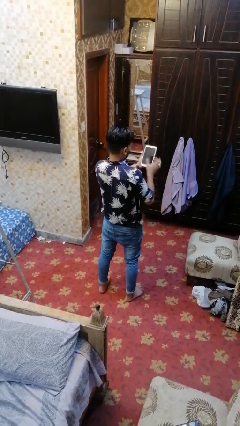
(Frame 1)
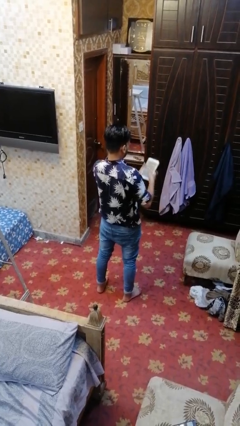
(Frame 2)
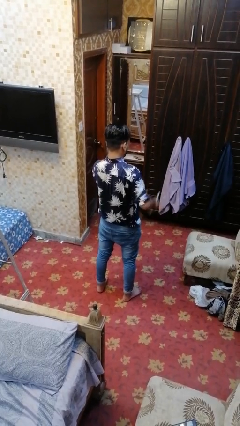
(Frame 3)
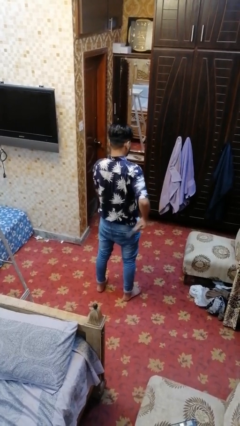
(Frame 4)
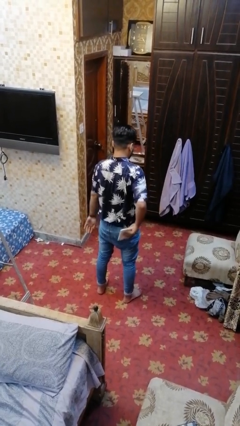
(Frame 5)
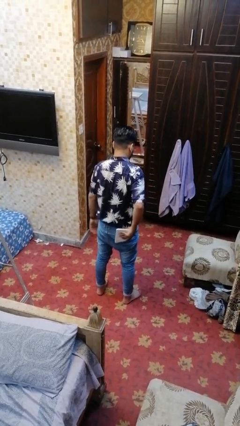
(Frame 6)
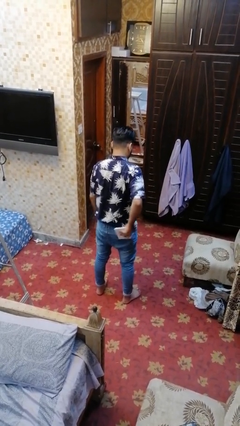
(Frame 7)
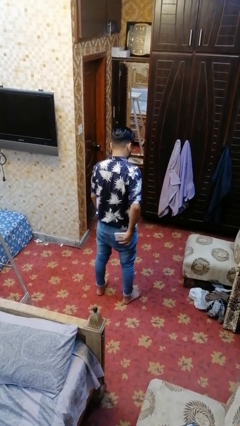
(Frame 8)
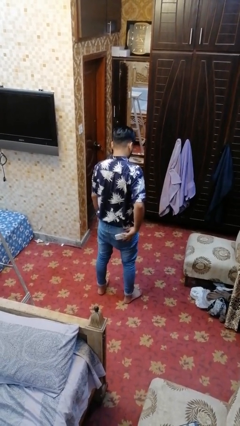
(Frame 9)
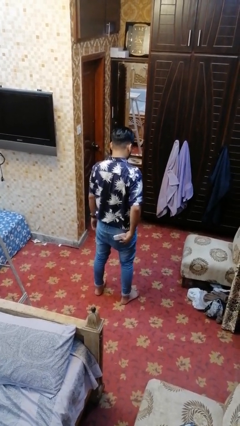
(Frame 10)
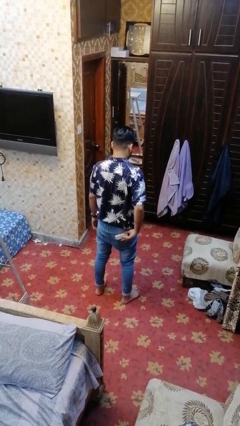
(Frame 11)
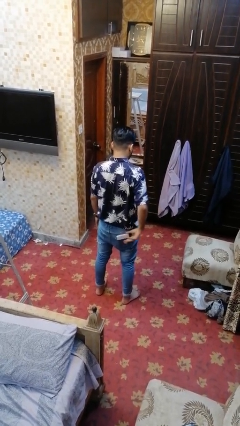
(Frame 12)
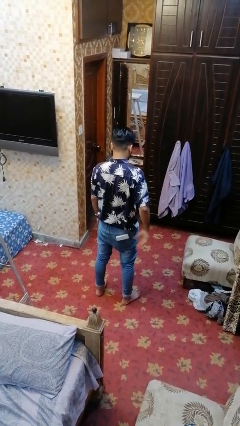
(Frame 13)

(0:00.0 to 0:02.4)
person puts phone into pocket

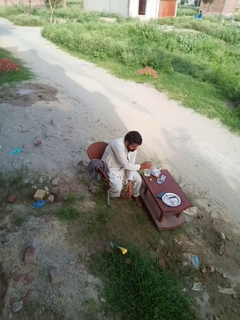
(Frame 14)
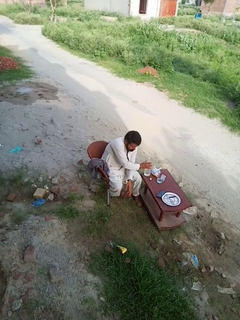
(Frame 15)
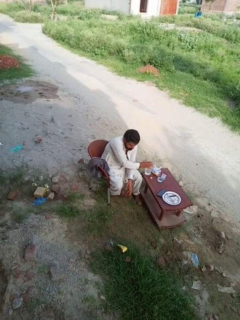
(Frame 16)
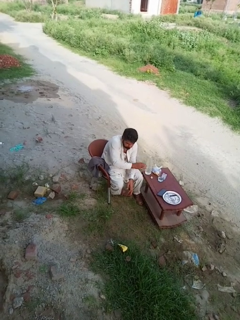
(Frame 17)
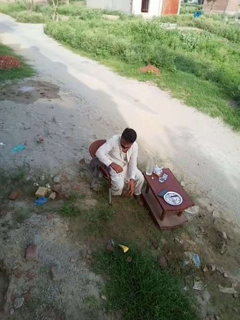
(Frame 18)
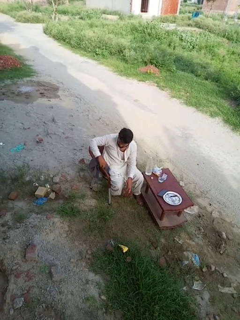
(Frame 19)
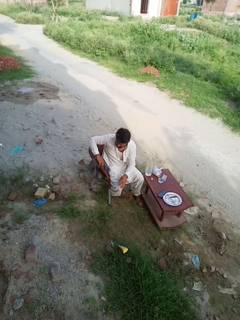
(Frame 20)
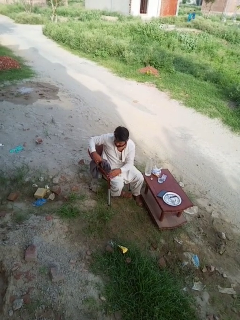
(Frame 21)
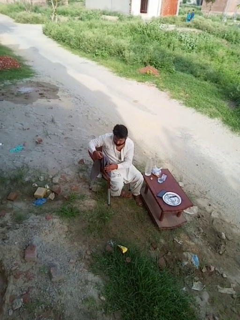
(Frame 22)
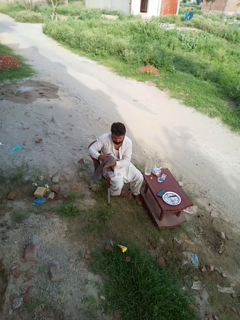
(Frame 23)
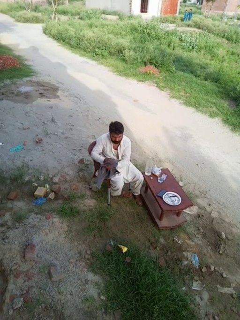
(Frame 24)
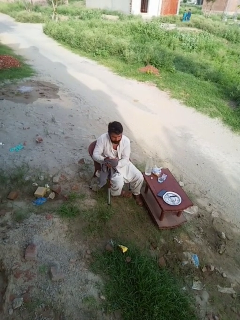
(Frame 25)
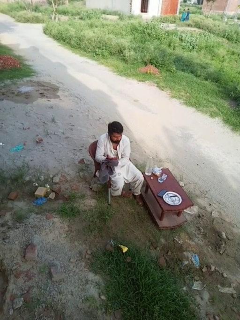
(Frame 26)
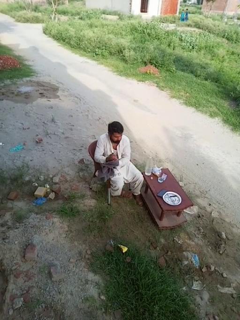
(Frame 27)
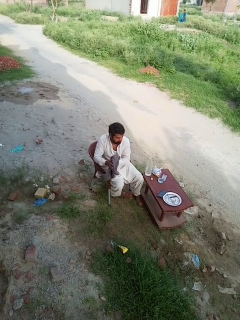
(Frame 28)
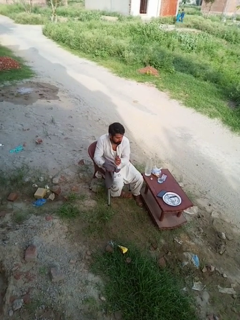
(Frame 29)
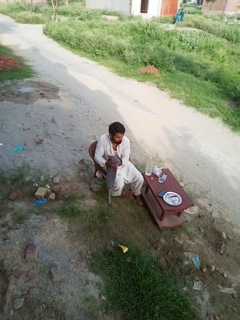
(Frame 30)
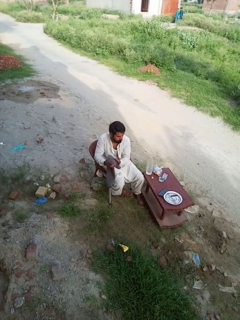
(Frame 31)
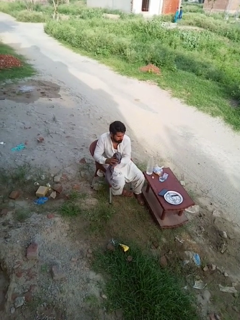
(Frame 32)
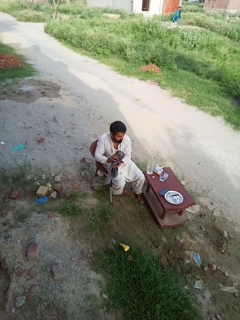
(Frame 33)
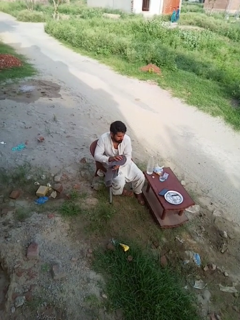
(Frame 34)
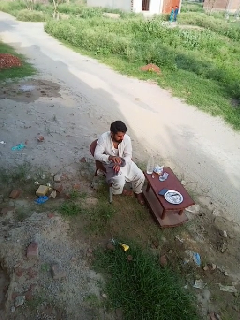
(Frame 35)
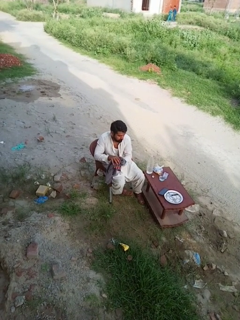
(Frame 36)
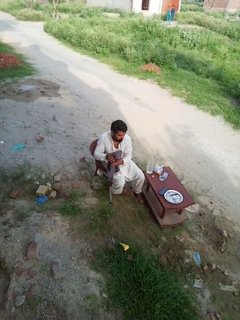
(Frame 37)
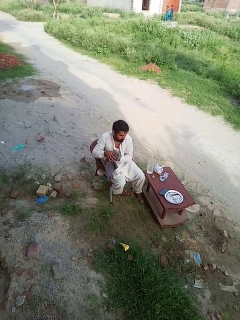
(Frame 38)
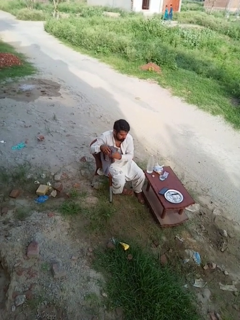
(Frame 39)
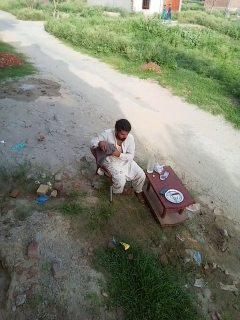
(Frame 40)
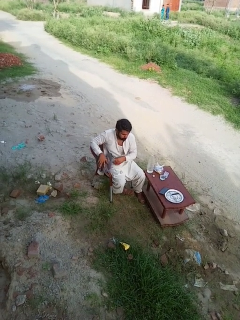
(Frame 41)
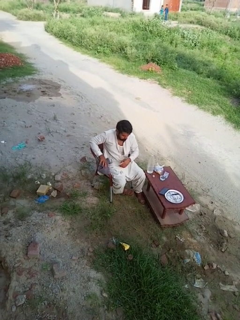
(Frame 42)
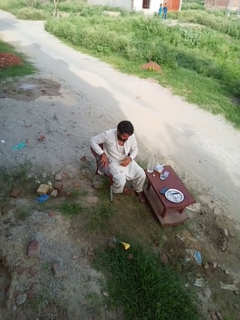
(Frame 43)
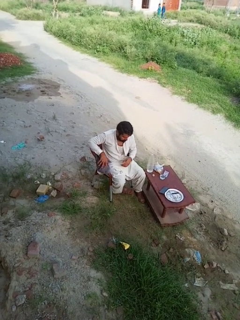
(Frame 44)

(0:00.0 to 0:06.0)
person dries hands with towel

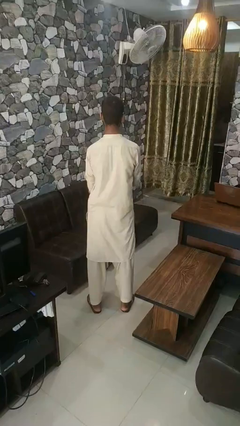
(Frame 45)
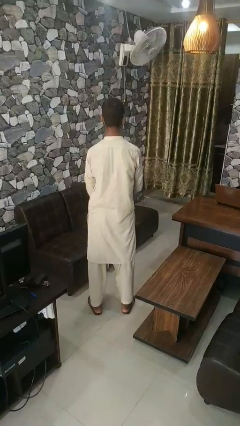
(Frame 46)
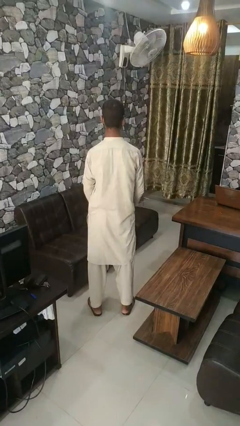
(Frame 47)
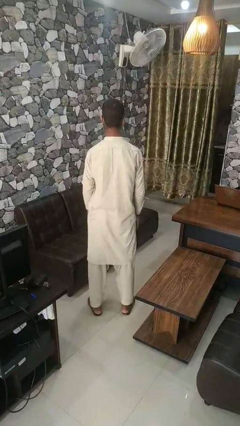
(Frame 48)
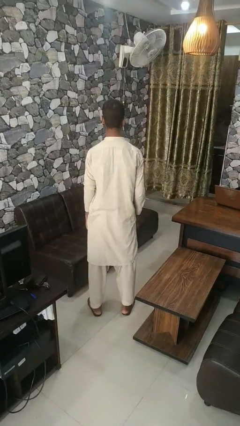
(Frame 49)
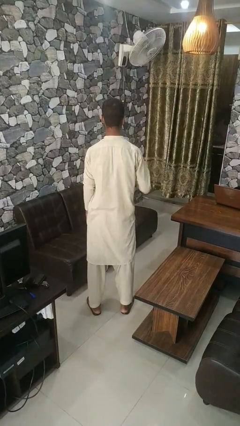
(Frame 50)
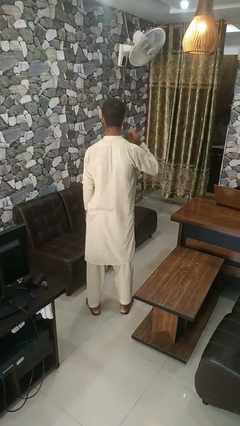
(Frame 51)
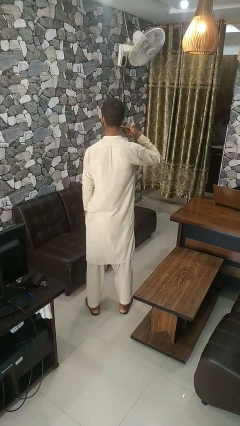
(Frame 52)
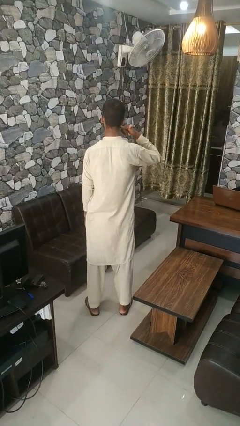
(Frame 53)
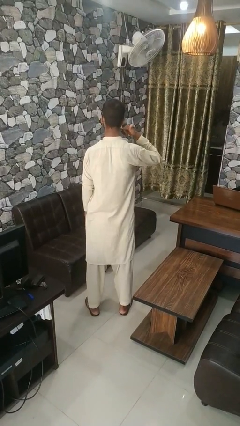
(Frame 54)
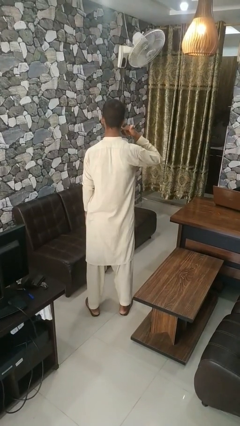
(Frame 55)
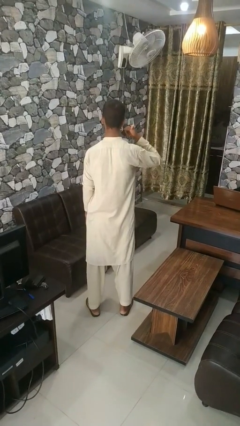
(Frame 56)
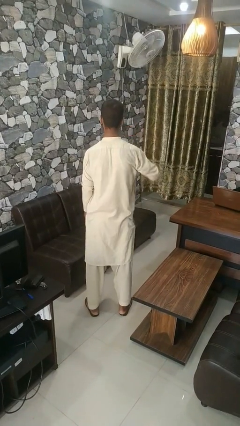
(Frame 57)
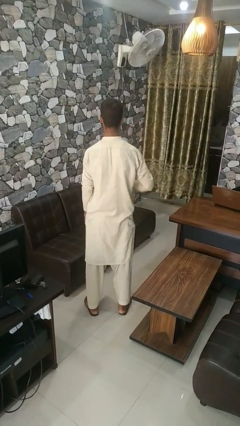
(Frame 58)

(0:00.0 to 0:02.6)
person gestures call me

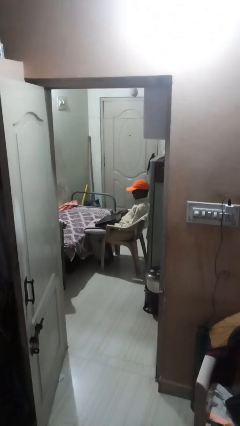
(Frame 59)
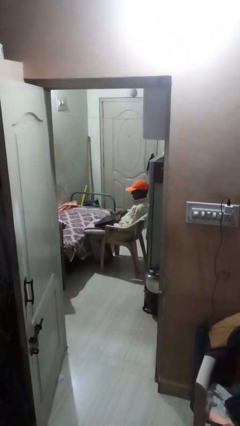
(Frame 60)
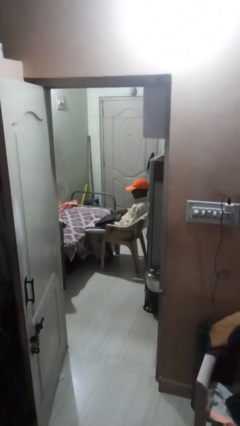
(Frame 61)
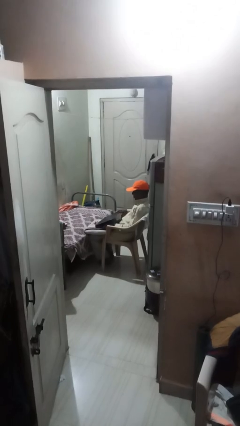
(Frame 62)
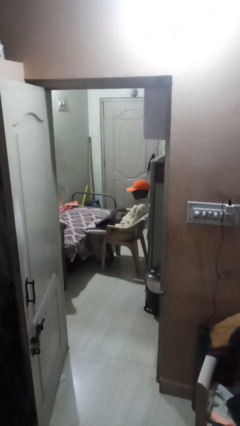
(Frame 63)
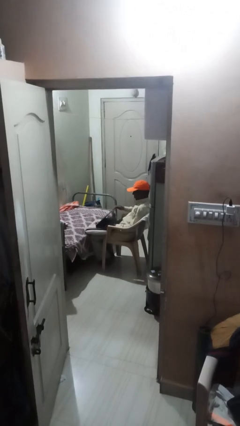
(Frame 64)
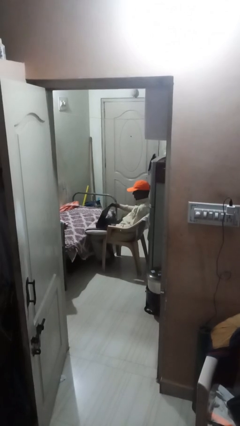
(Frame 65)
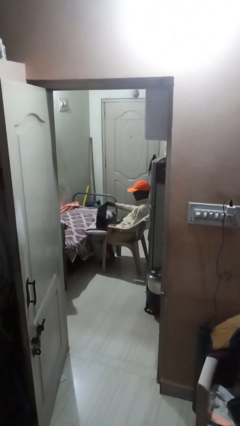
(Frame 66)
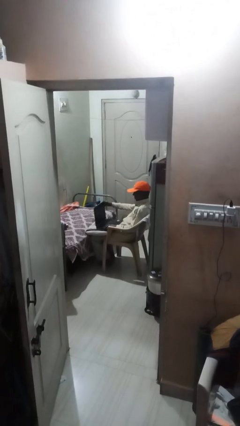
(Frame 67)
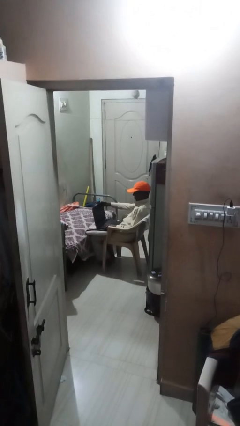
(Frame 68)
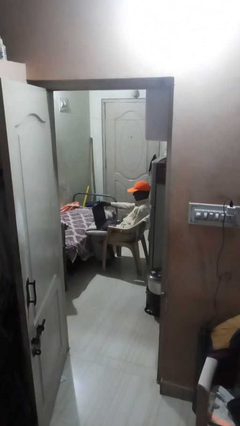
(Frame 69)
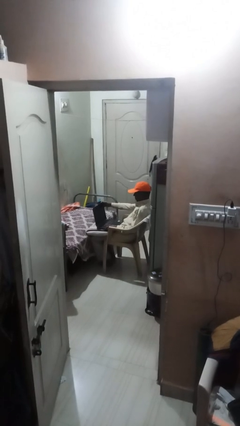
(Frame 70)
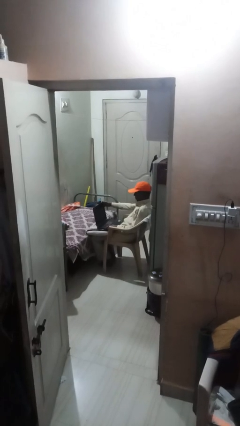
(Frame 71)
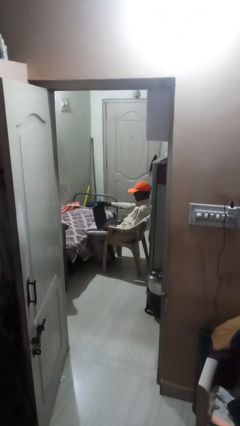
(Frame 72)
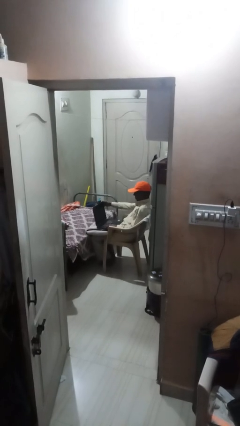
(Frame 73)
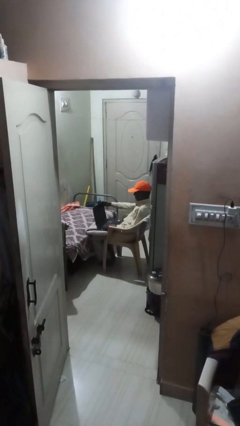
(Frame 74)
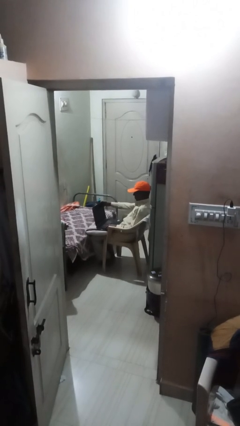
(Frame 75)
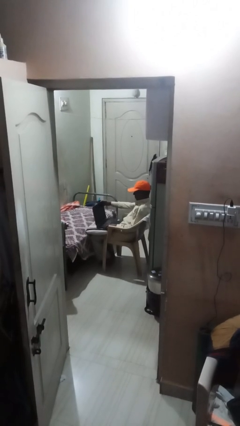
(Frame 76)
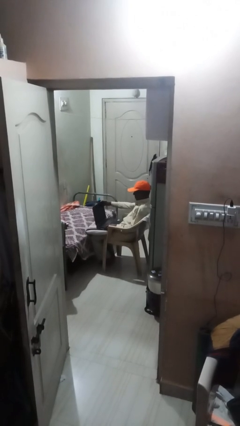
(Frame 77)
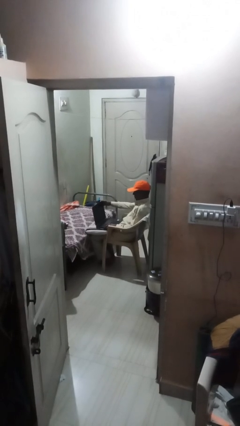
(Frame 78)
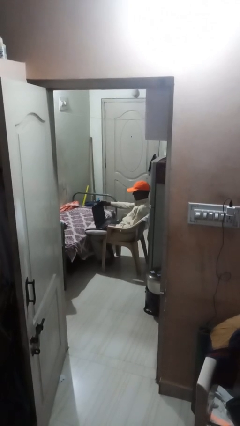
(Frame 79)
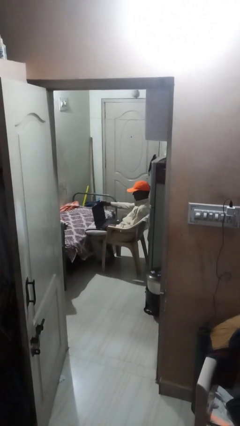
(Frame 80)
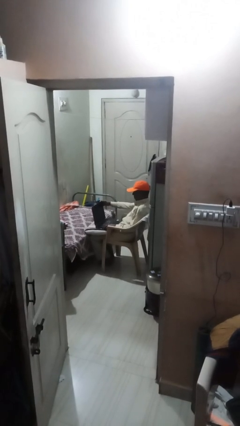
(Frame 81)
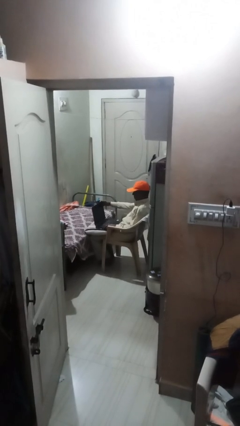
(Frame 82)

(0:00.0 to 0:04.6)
person interacts with laptop

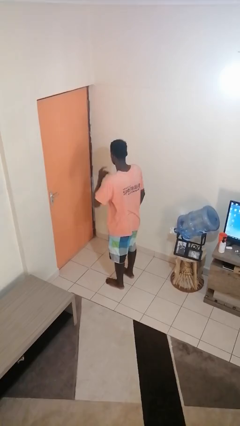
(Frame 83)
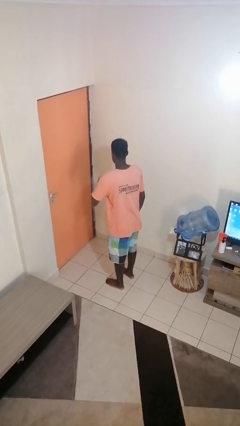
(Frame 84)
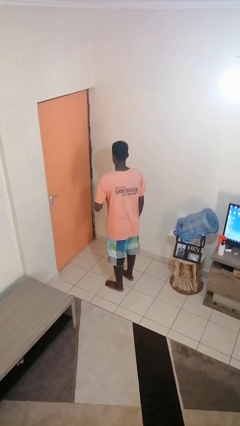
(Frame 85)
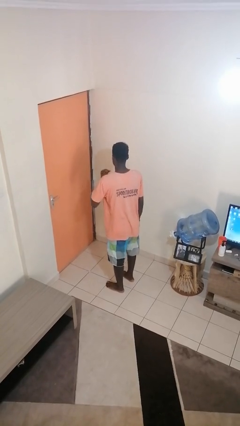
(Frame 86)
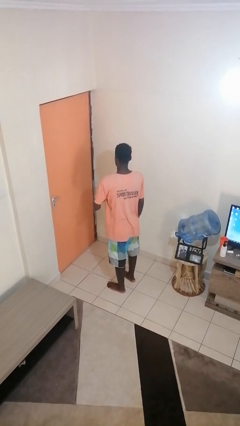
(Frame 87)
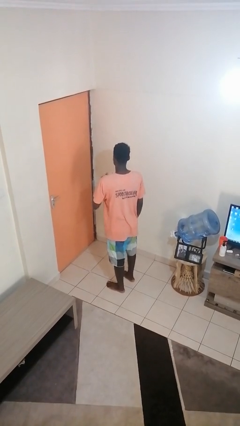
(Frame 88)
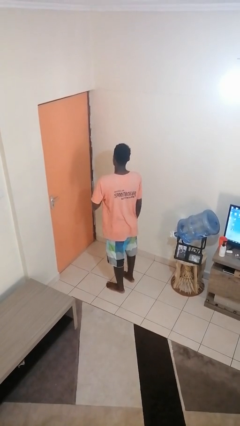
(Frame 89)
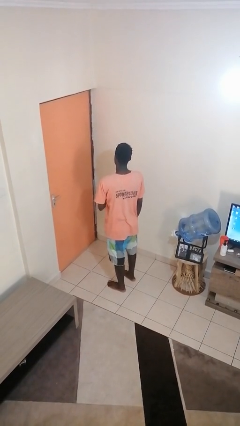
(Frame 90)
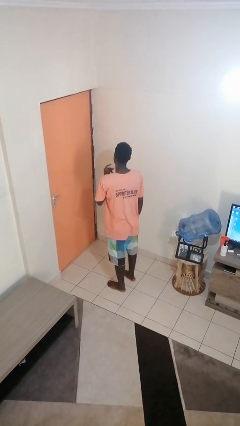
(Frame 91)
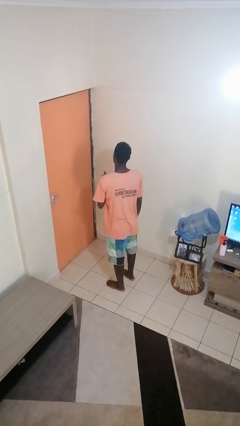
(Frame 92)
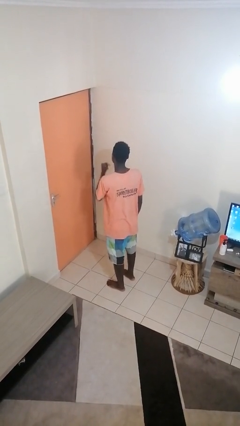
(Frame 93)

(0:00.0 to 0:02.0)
person snaps fingers

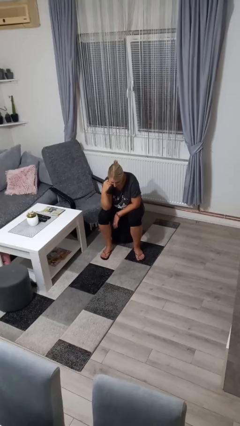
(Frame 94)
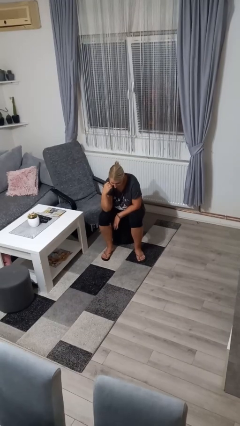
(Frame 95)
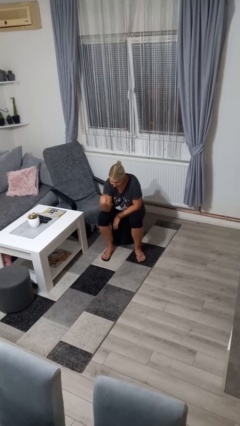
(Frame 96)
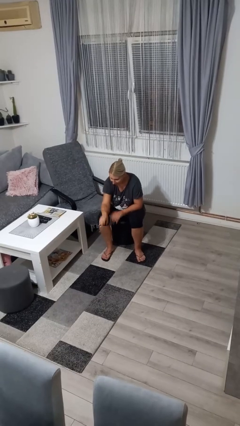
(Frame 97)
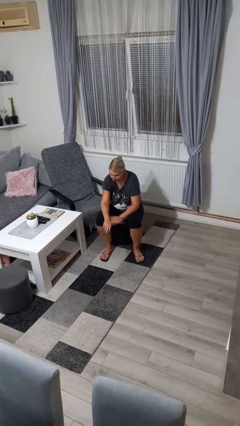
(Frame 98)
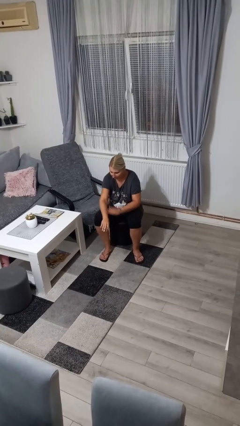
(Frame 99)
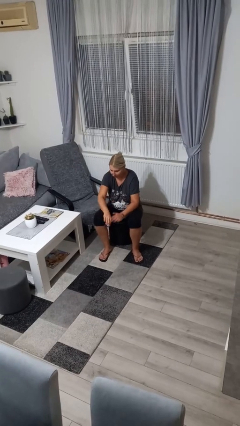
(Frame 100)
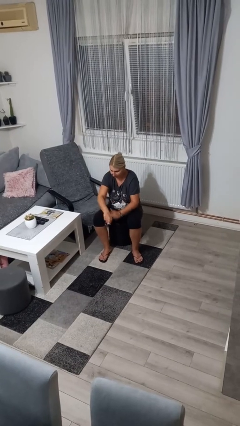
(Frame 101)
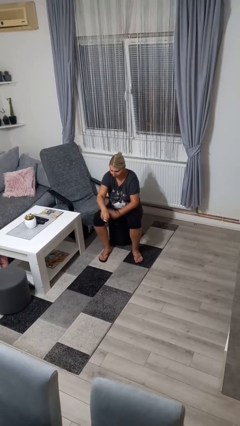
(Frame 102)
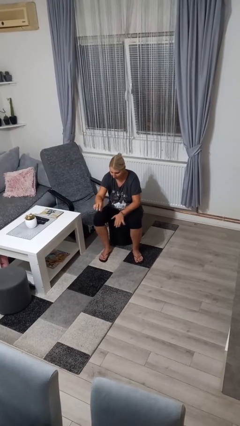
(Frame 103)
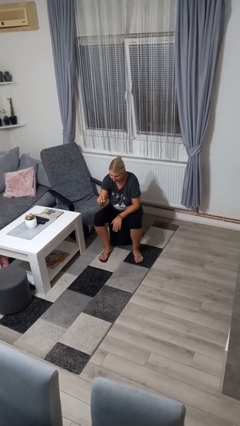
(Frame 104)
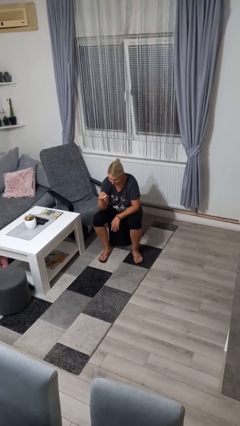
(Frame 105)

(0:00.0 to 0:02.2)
person swats bug
